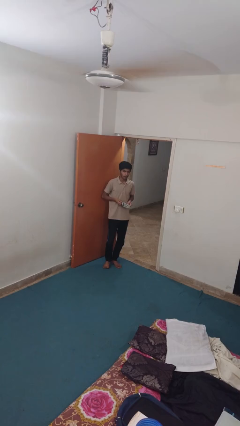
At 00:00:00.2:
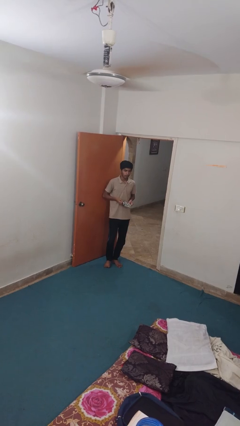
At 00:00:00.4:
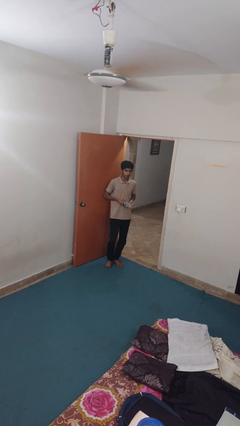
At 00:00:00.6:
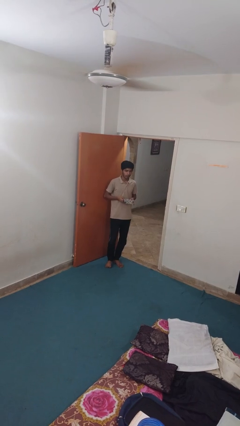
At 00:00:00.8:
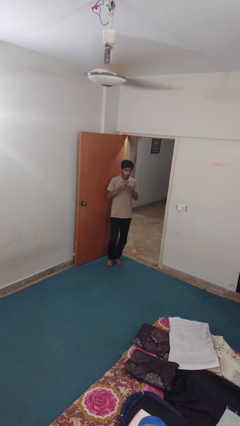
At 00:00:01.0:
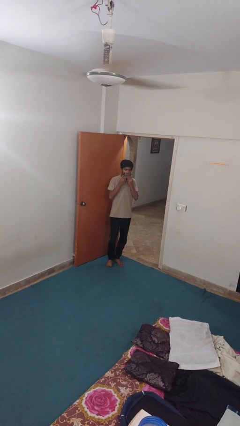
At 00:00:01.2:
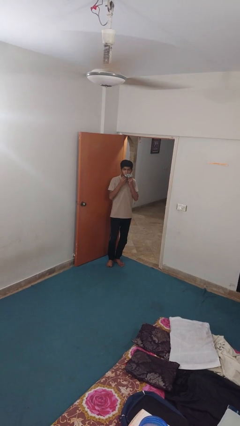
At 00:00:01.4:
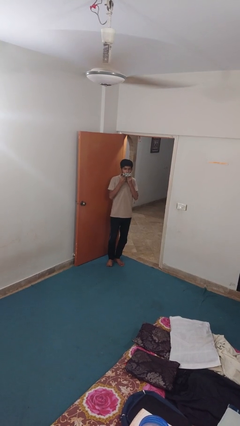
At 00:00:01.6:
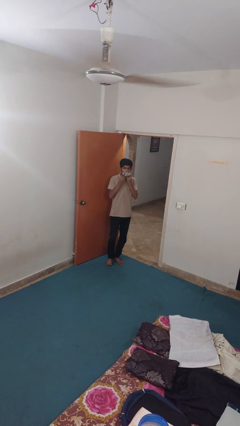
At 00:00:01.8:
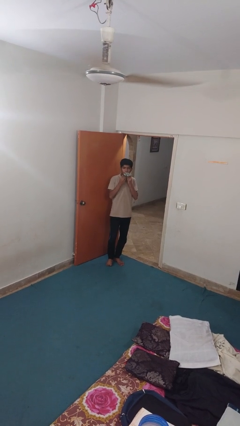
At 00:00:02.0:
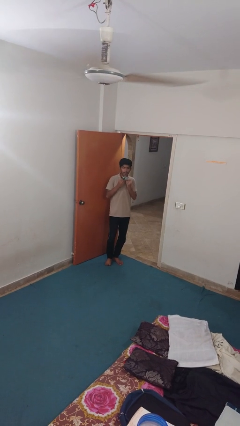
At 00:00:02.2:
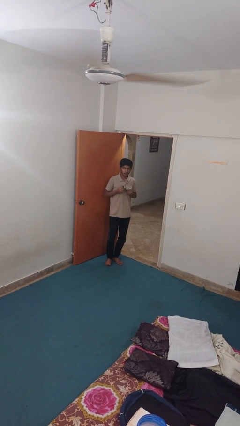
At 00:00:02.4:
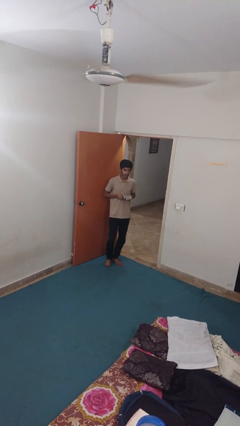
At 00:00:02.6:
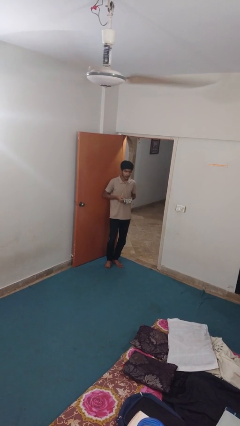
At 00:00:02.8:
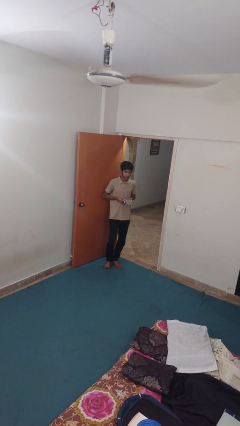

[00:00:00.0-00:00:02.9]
person wipes mouth with napkin

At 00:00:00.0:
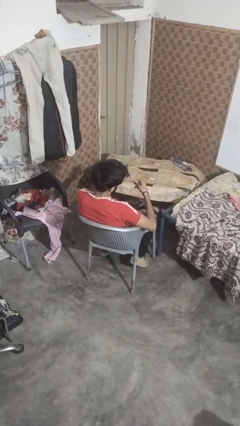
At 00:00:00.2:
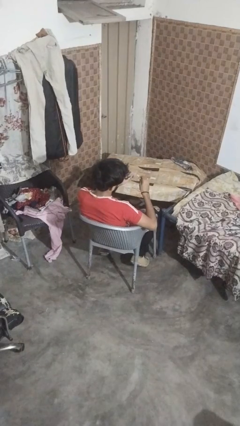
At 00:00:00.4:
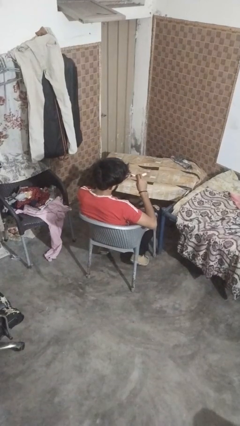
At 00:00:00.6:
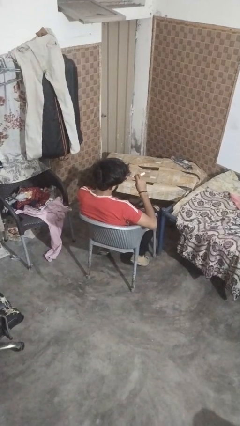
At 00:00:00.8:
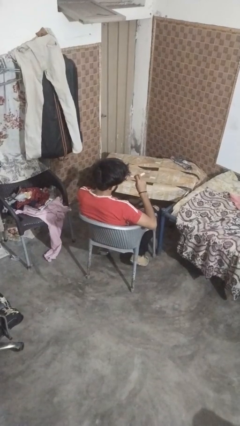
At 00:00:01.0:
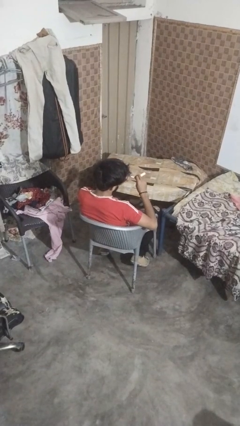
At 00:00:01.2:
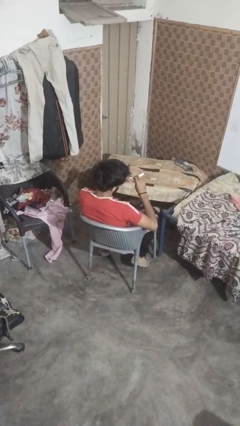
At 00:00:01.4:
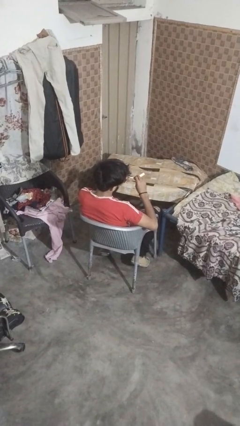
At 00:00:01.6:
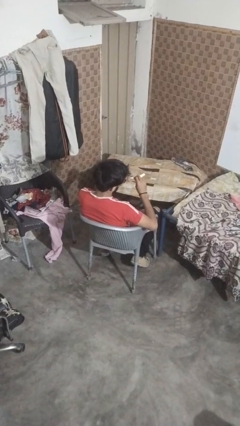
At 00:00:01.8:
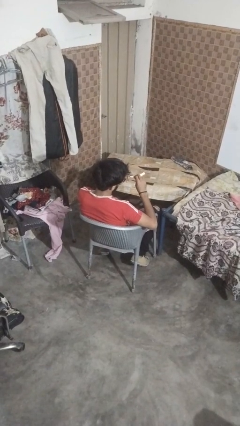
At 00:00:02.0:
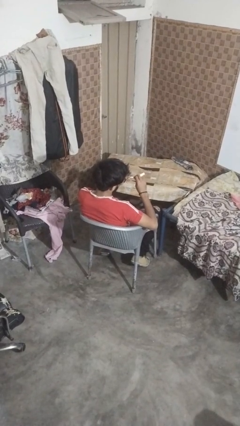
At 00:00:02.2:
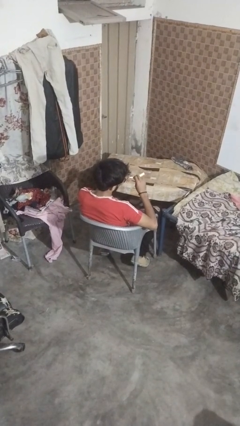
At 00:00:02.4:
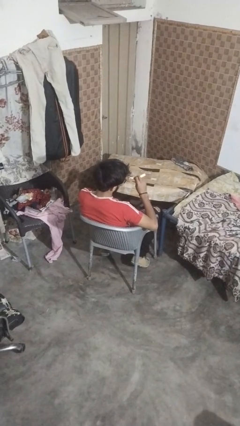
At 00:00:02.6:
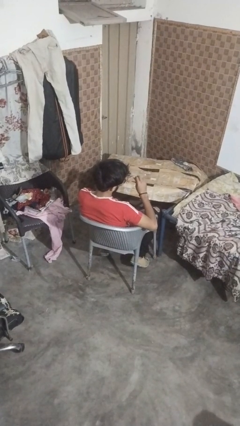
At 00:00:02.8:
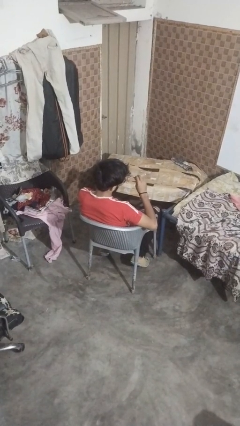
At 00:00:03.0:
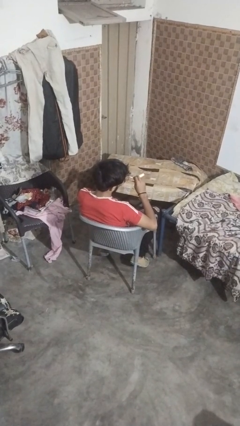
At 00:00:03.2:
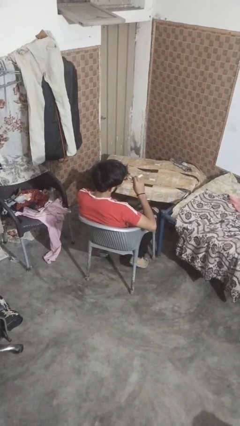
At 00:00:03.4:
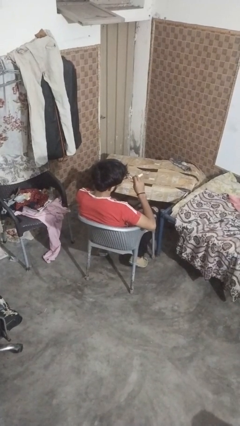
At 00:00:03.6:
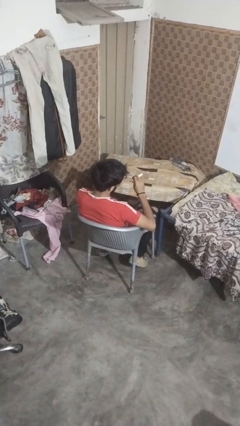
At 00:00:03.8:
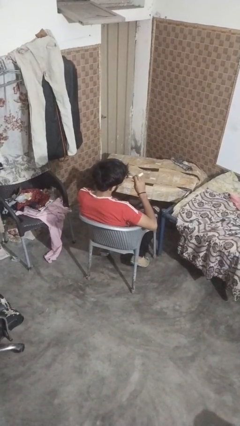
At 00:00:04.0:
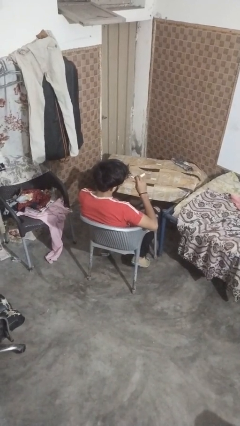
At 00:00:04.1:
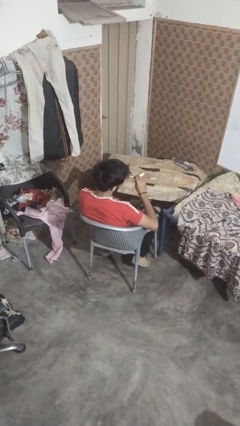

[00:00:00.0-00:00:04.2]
person files fingernails

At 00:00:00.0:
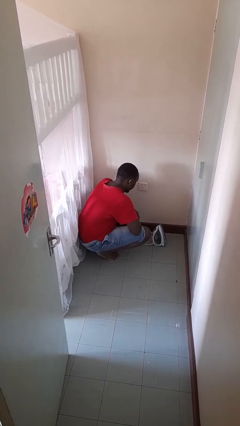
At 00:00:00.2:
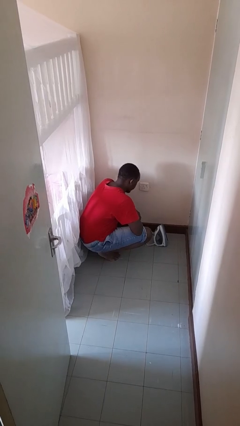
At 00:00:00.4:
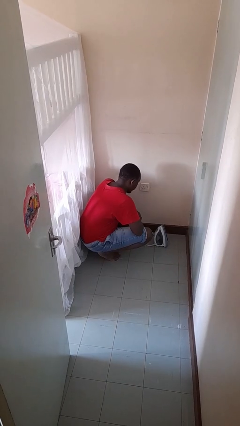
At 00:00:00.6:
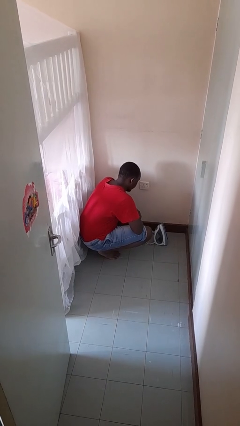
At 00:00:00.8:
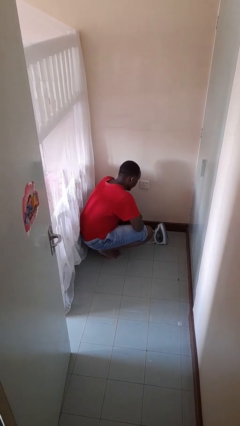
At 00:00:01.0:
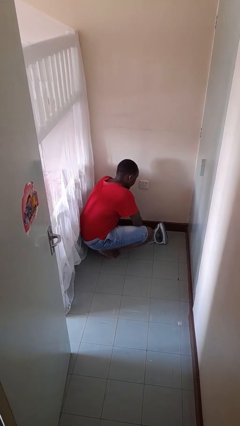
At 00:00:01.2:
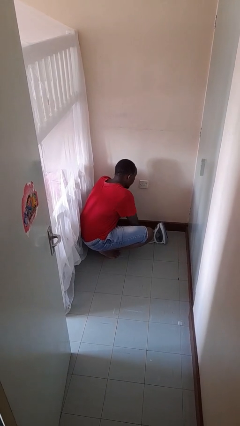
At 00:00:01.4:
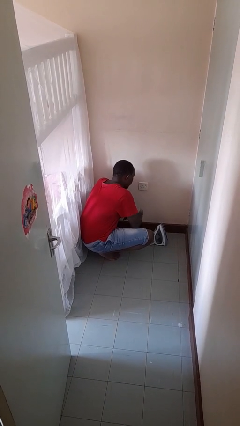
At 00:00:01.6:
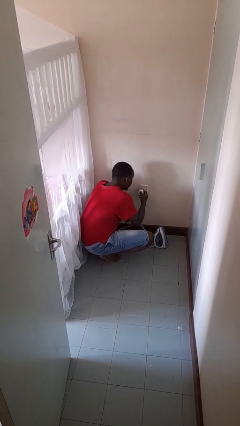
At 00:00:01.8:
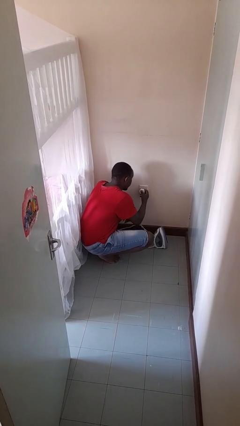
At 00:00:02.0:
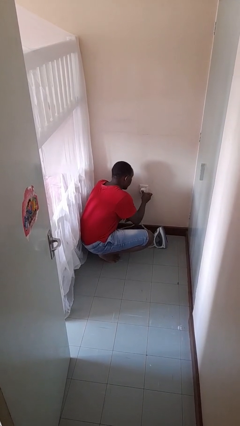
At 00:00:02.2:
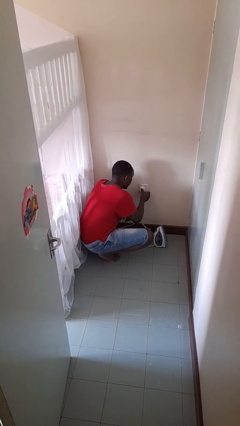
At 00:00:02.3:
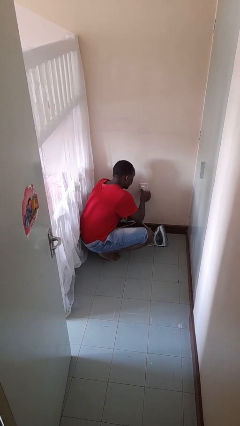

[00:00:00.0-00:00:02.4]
person plugs into electrical socket

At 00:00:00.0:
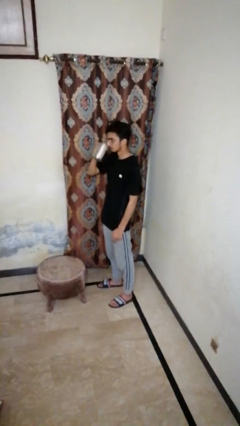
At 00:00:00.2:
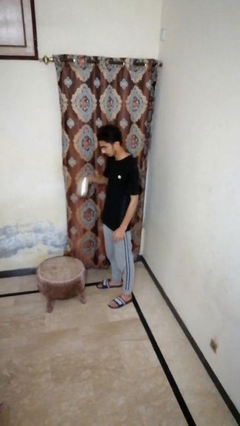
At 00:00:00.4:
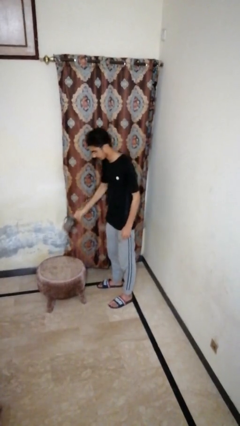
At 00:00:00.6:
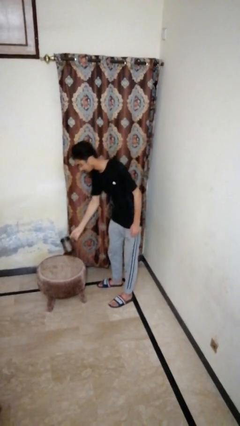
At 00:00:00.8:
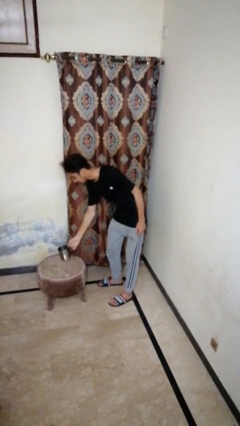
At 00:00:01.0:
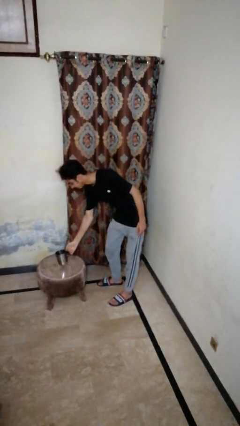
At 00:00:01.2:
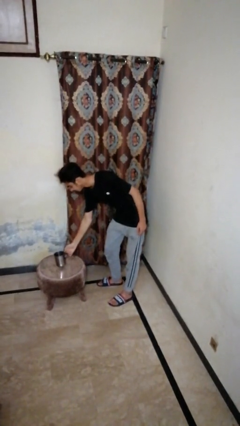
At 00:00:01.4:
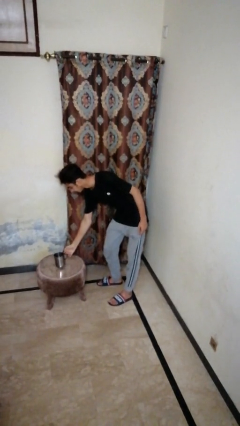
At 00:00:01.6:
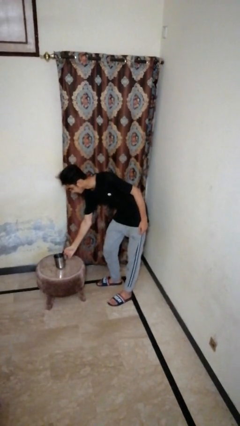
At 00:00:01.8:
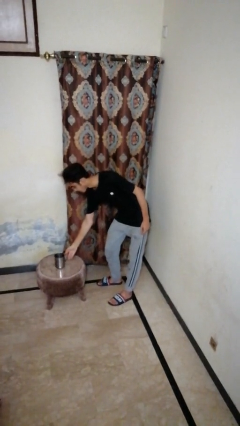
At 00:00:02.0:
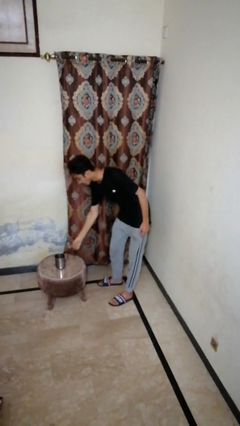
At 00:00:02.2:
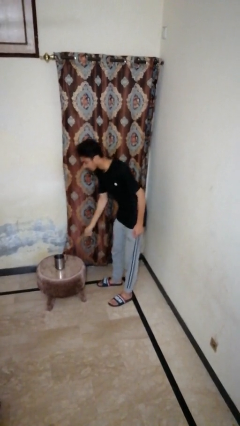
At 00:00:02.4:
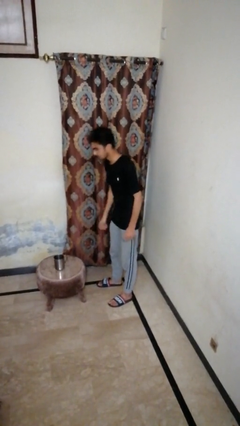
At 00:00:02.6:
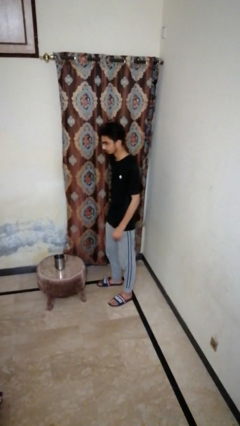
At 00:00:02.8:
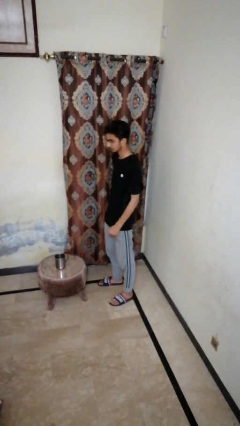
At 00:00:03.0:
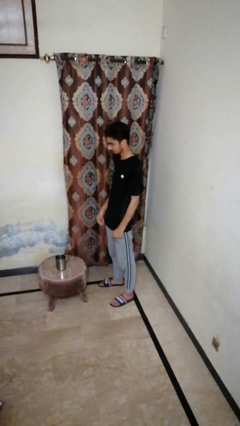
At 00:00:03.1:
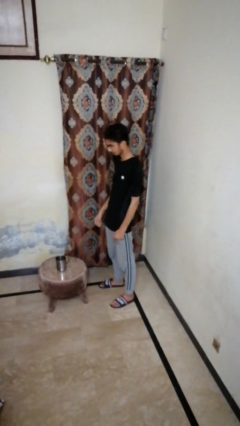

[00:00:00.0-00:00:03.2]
person puts down object on table

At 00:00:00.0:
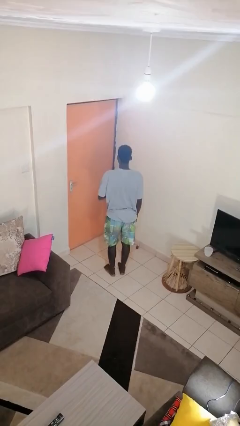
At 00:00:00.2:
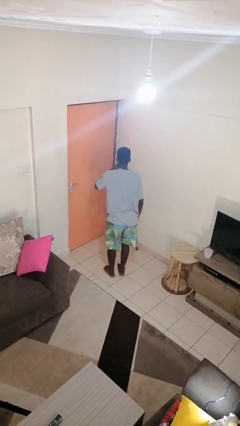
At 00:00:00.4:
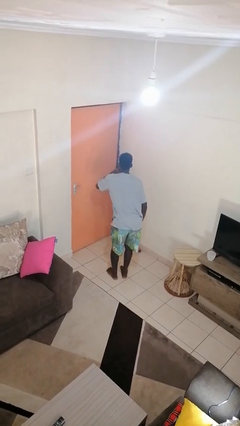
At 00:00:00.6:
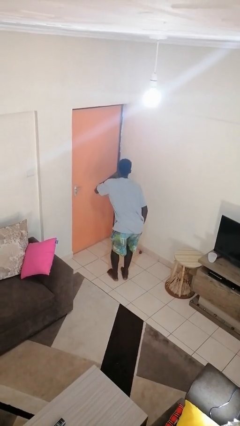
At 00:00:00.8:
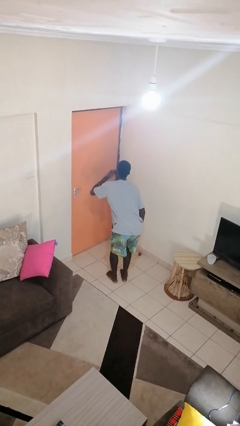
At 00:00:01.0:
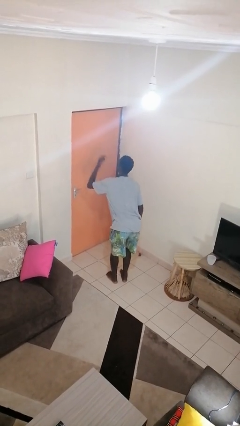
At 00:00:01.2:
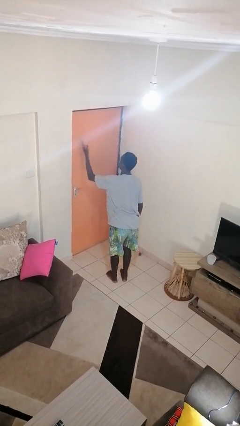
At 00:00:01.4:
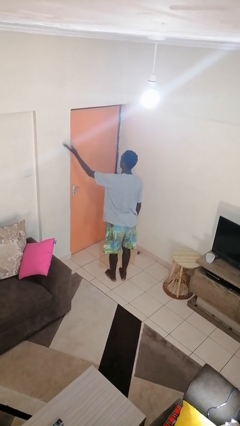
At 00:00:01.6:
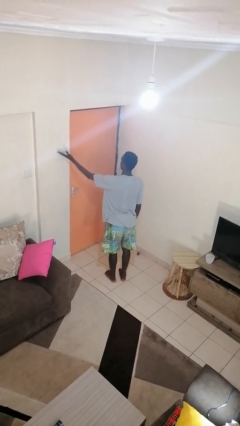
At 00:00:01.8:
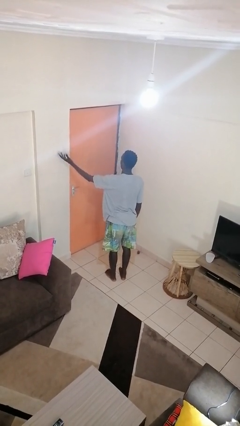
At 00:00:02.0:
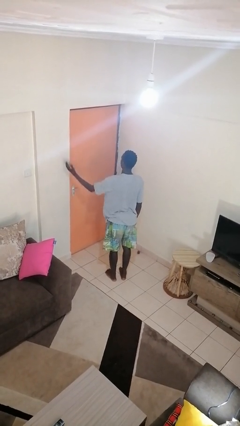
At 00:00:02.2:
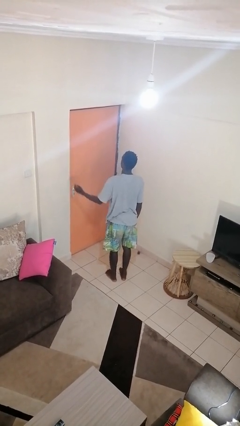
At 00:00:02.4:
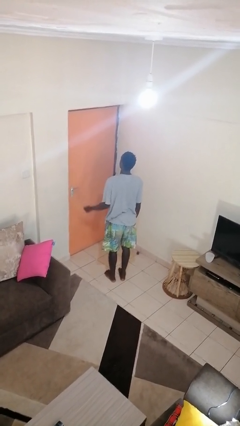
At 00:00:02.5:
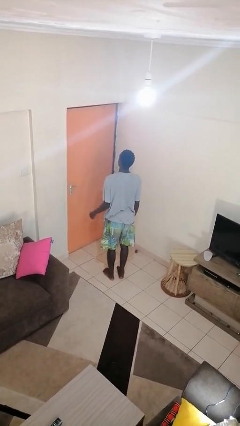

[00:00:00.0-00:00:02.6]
person gestures blow kiss

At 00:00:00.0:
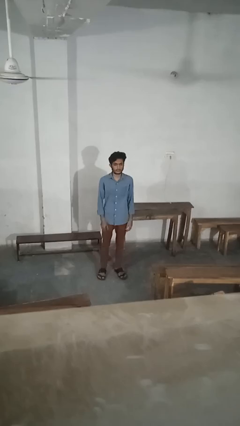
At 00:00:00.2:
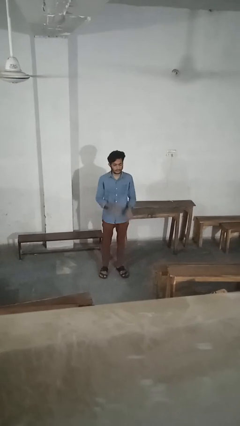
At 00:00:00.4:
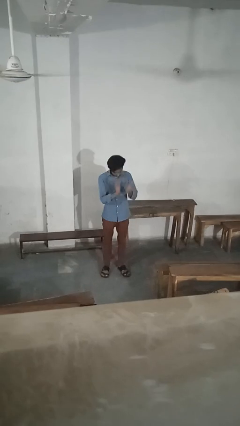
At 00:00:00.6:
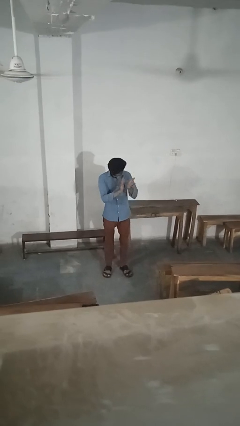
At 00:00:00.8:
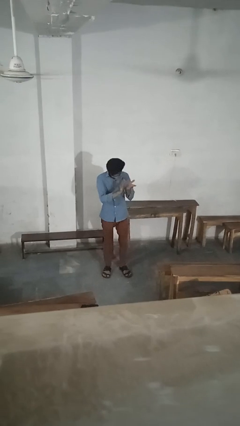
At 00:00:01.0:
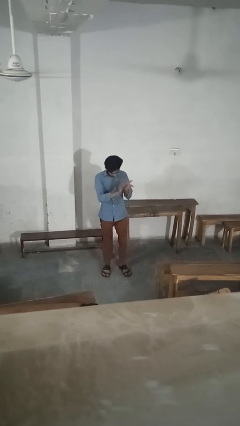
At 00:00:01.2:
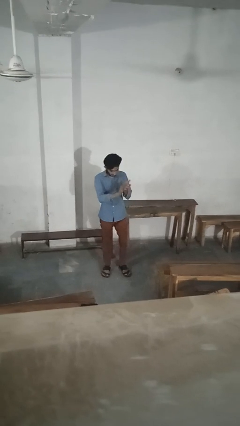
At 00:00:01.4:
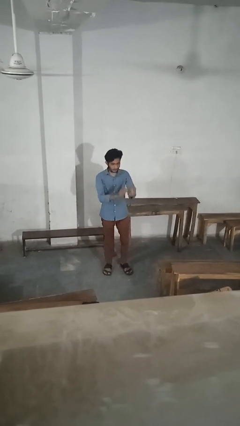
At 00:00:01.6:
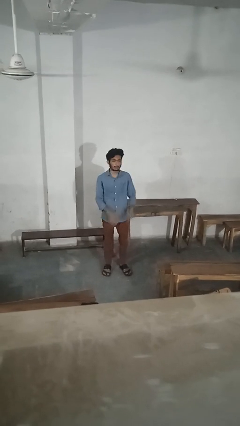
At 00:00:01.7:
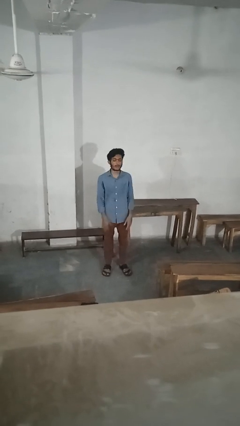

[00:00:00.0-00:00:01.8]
person claps hands
